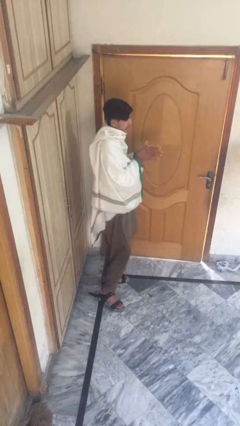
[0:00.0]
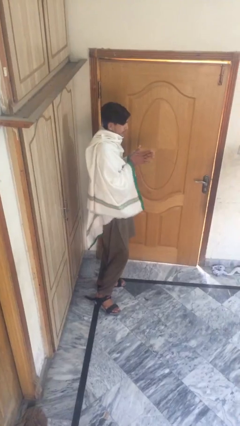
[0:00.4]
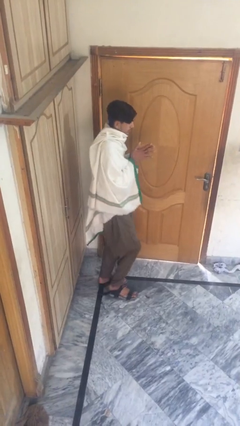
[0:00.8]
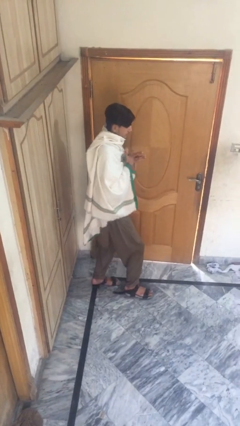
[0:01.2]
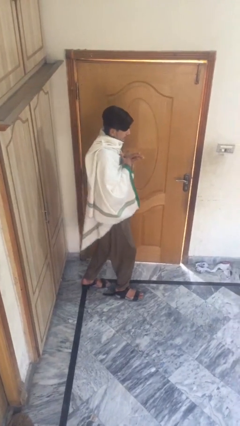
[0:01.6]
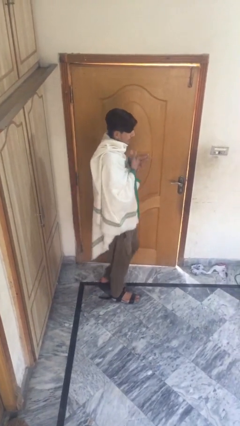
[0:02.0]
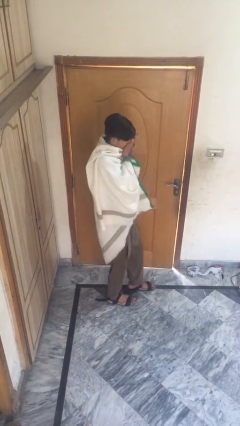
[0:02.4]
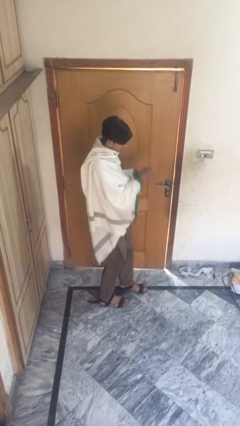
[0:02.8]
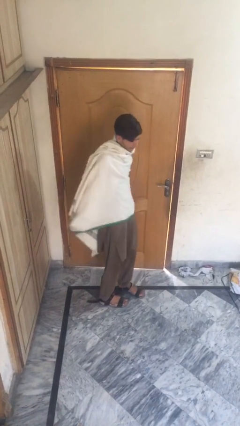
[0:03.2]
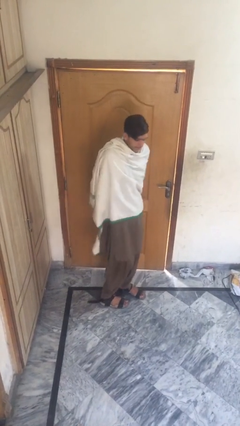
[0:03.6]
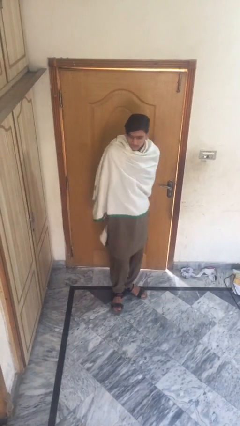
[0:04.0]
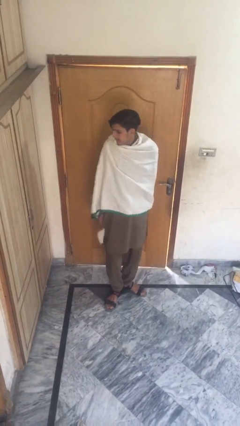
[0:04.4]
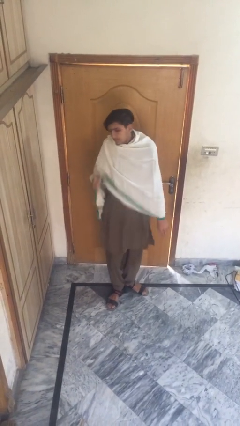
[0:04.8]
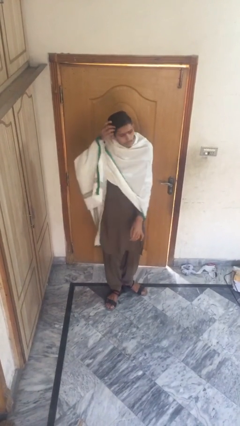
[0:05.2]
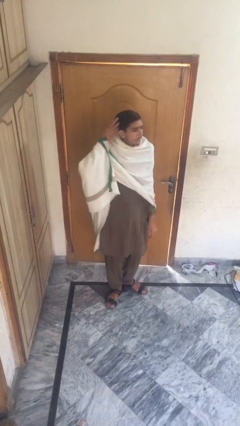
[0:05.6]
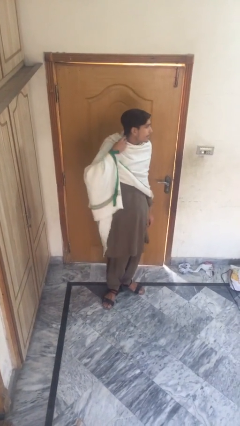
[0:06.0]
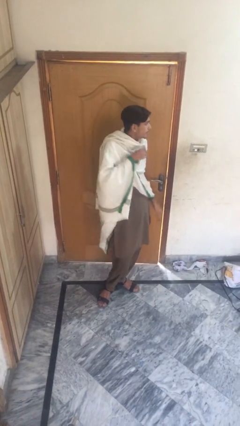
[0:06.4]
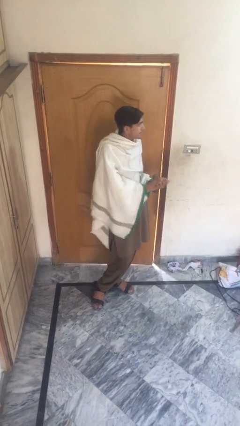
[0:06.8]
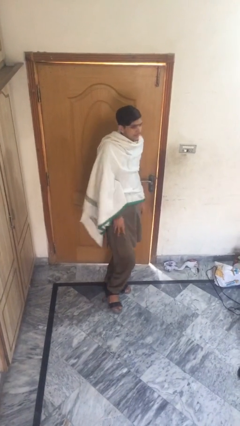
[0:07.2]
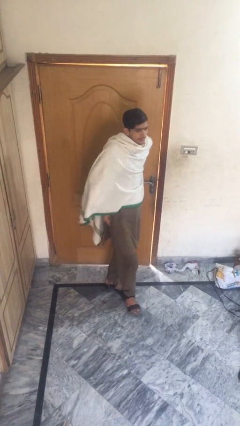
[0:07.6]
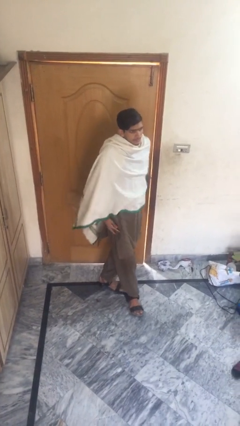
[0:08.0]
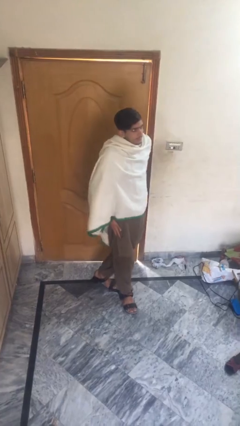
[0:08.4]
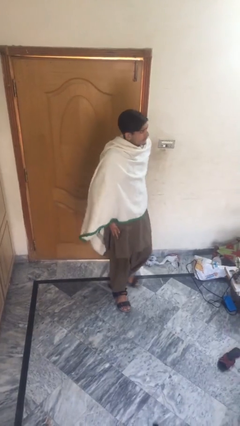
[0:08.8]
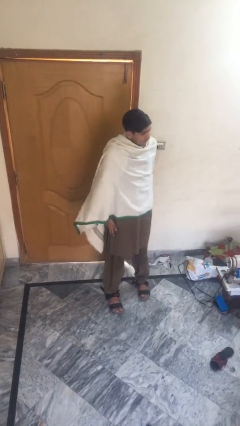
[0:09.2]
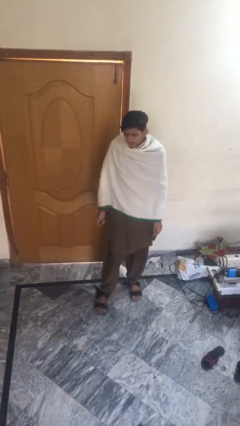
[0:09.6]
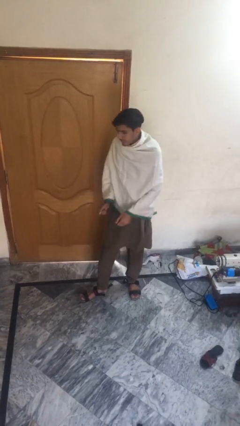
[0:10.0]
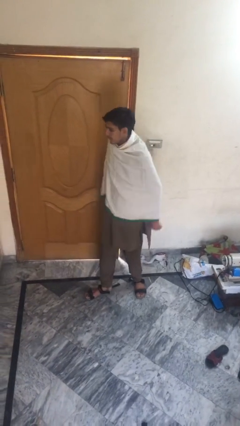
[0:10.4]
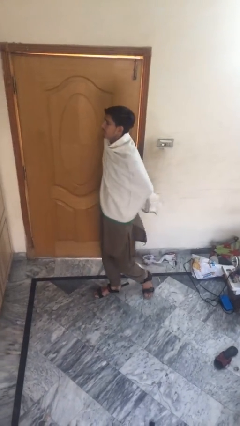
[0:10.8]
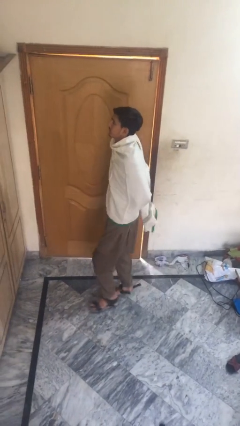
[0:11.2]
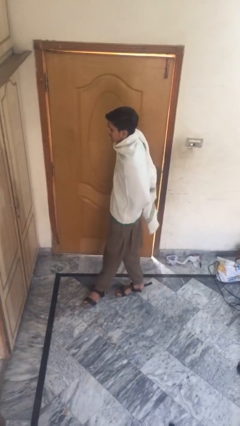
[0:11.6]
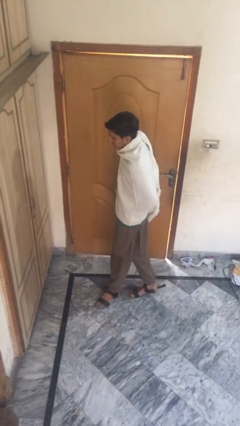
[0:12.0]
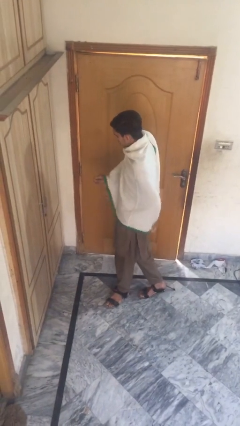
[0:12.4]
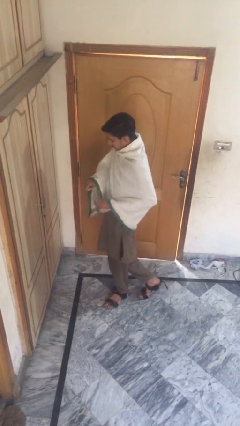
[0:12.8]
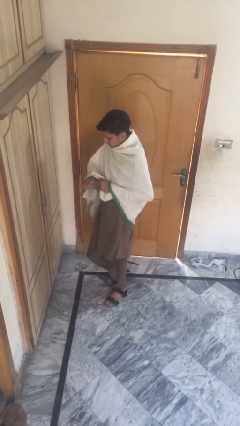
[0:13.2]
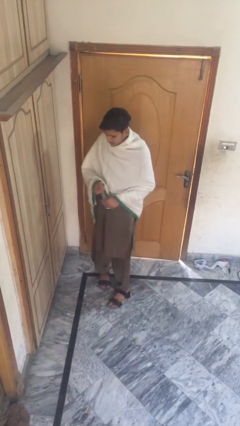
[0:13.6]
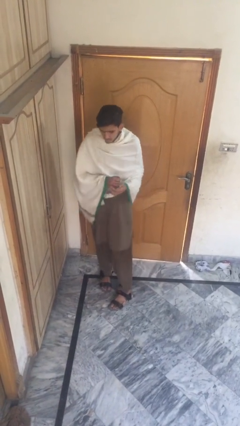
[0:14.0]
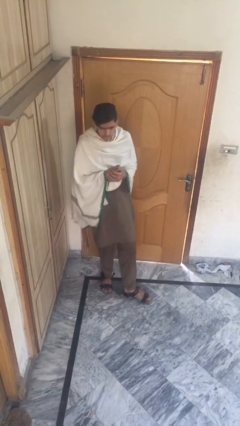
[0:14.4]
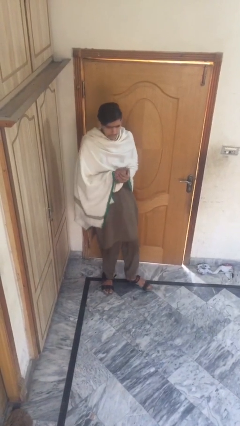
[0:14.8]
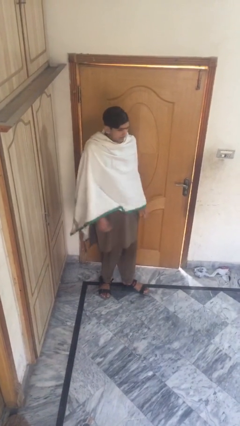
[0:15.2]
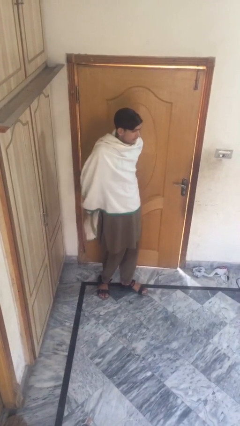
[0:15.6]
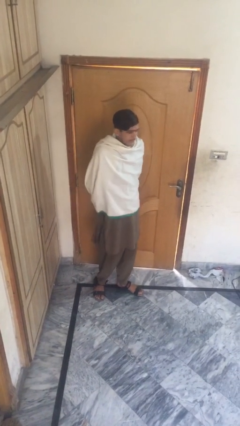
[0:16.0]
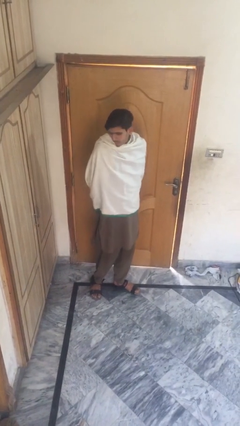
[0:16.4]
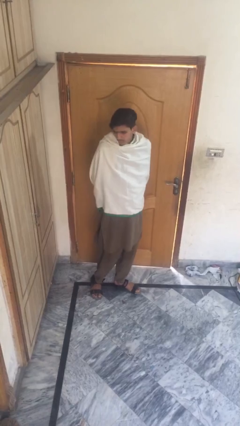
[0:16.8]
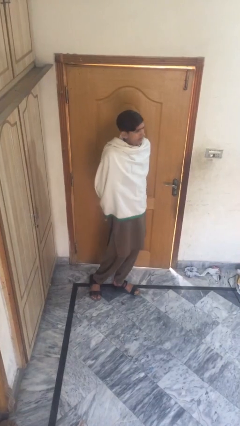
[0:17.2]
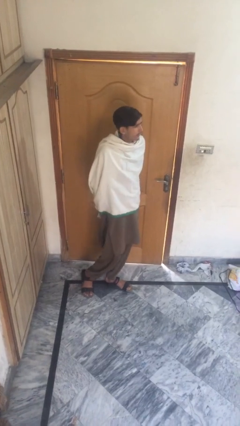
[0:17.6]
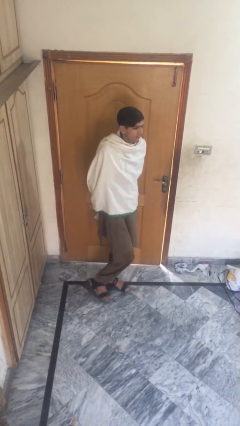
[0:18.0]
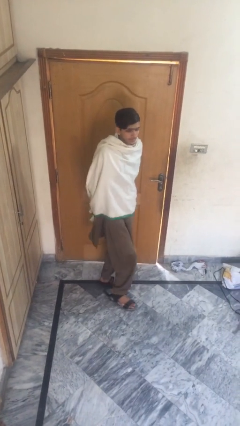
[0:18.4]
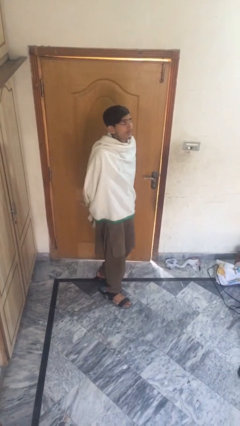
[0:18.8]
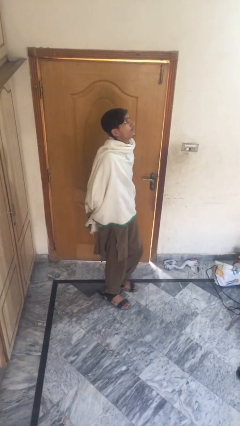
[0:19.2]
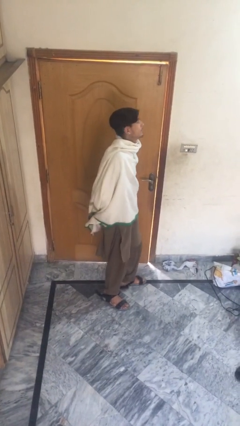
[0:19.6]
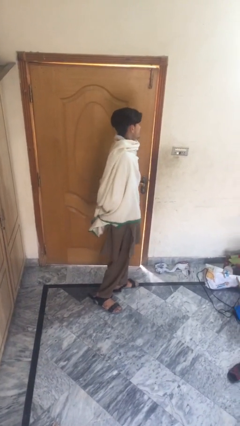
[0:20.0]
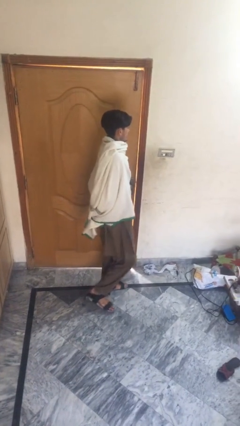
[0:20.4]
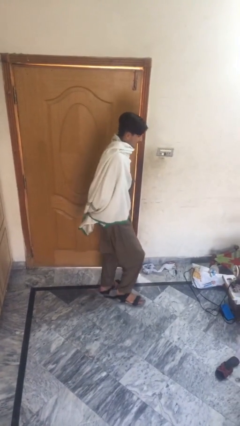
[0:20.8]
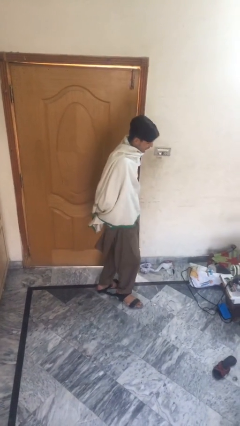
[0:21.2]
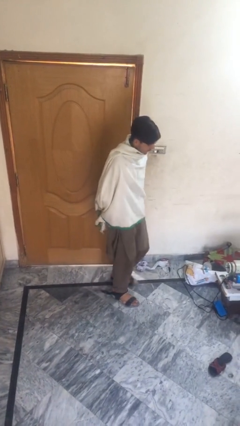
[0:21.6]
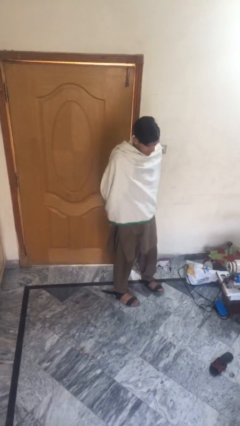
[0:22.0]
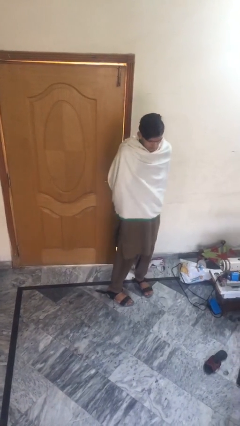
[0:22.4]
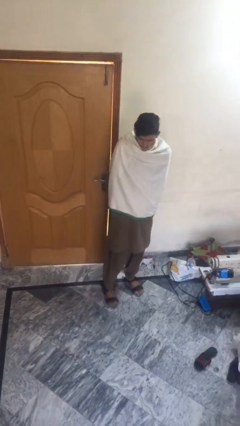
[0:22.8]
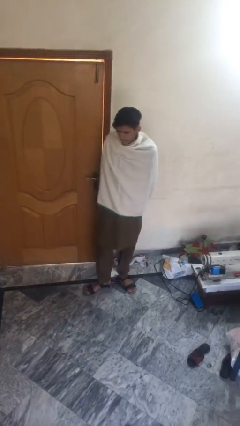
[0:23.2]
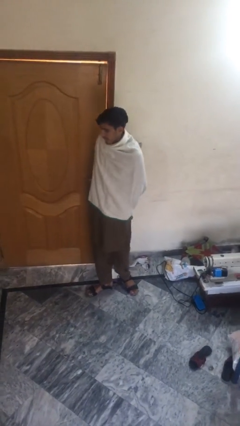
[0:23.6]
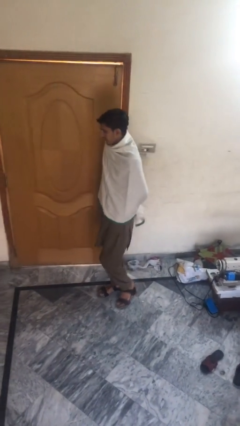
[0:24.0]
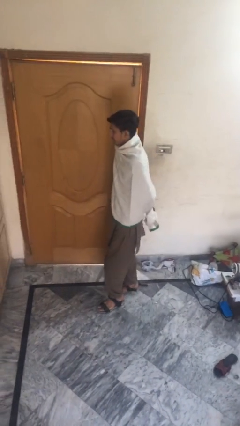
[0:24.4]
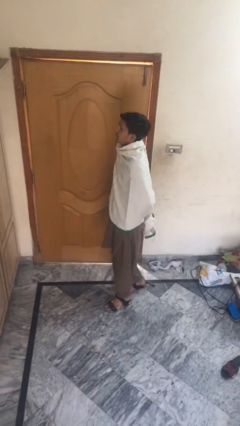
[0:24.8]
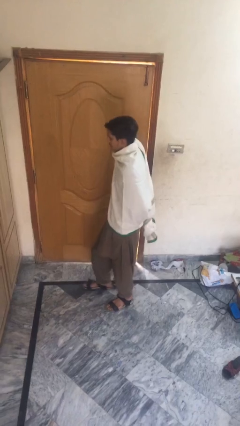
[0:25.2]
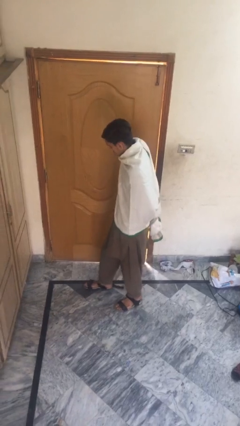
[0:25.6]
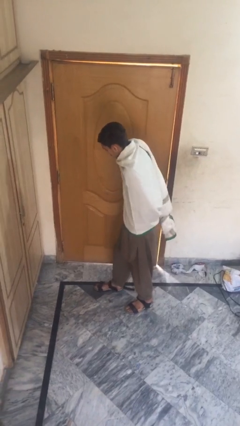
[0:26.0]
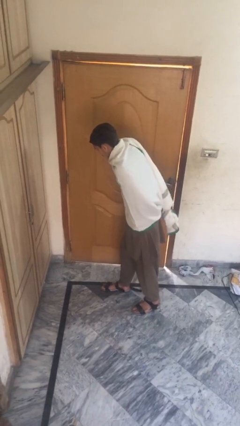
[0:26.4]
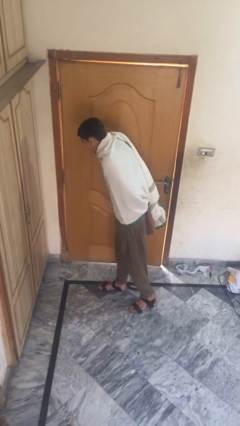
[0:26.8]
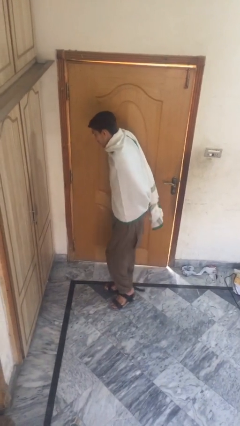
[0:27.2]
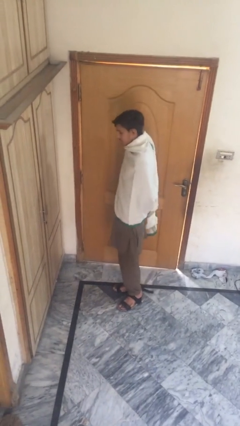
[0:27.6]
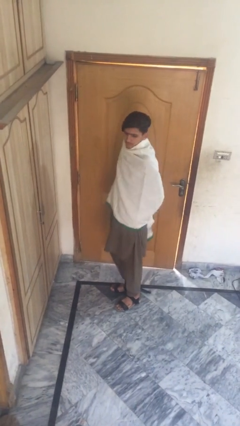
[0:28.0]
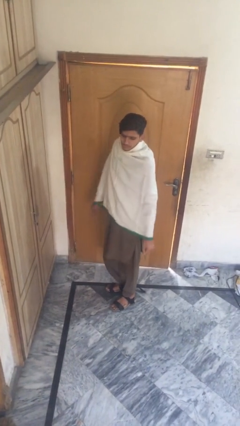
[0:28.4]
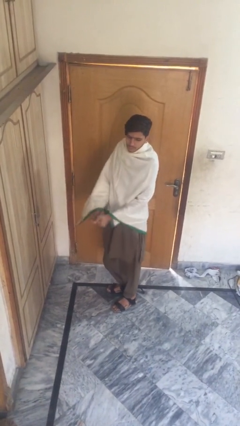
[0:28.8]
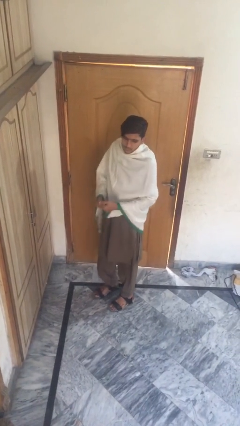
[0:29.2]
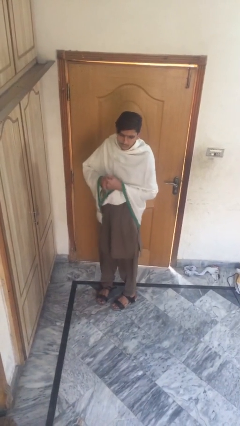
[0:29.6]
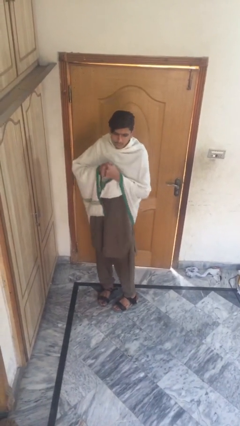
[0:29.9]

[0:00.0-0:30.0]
person walks

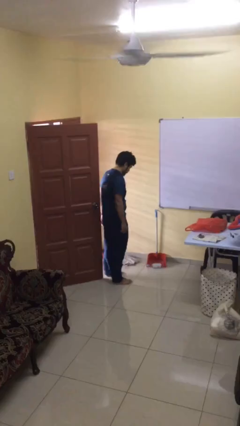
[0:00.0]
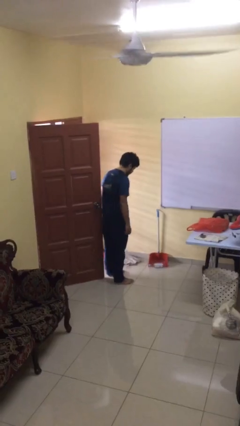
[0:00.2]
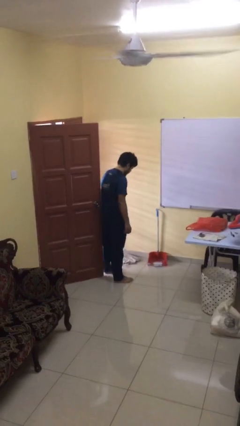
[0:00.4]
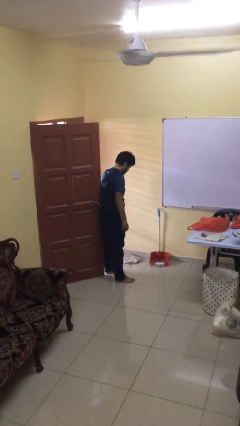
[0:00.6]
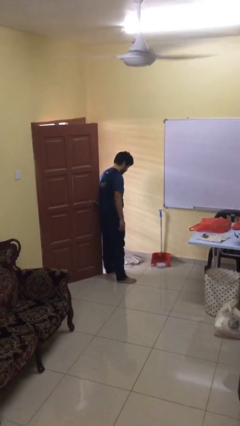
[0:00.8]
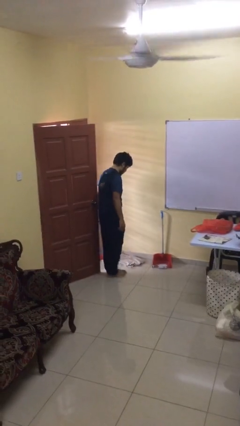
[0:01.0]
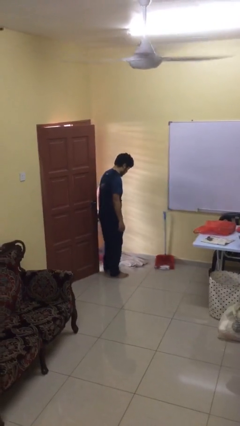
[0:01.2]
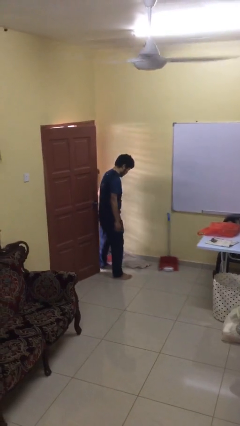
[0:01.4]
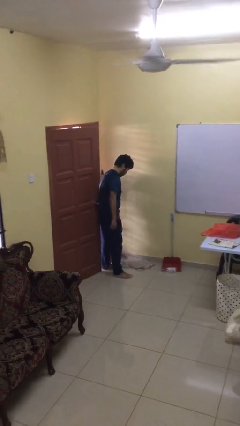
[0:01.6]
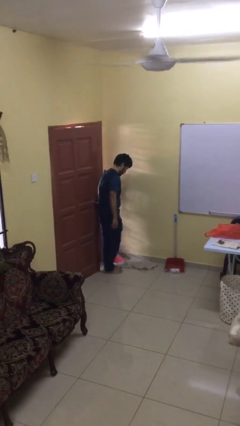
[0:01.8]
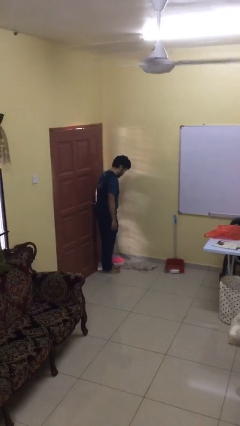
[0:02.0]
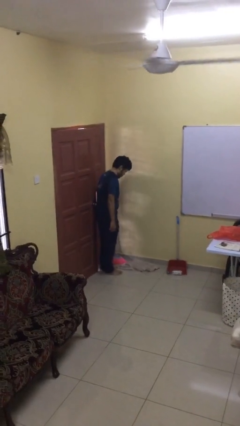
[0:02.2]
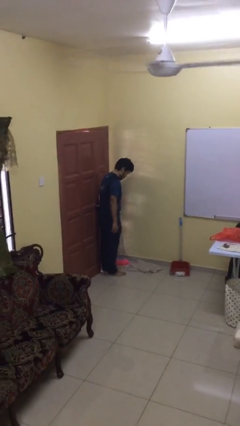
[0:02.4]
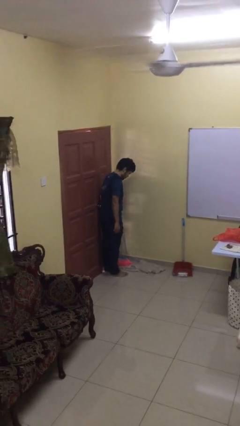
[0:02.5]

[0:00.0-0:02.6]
person closes door with hip
